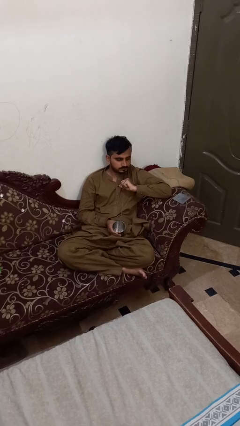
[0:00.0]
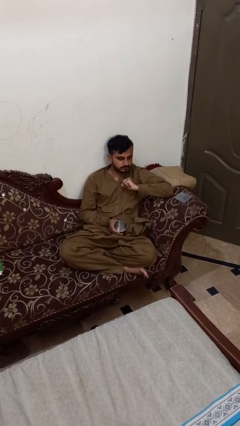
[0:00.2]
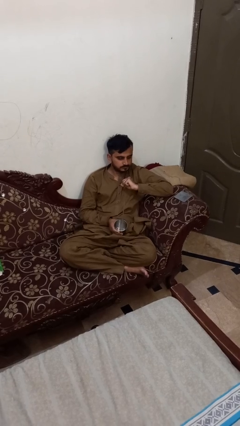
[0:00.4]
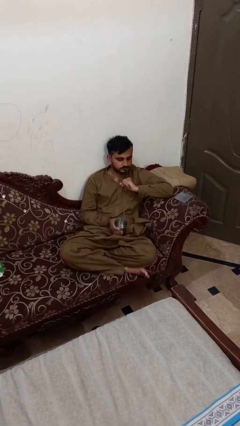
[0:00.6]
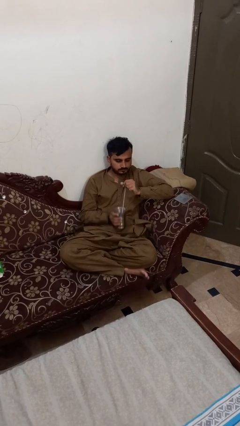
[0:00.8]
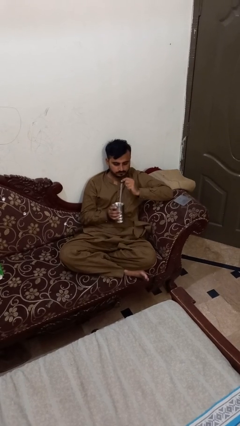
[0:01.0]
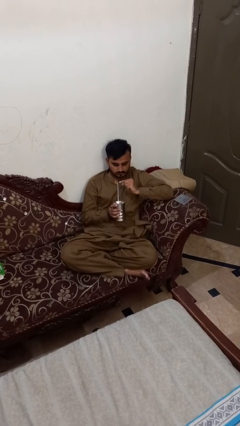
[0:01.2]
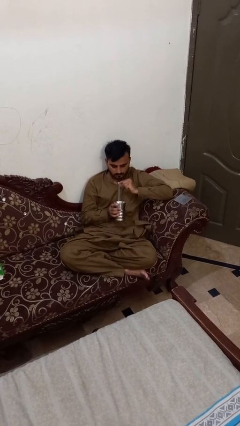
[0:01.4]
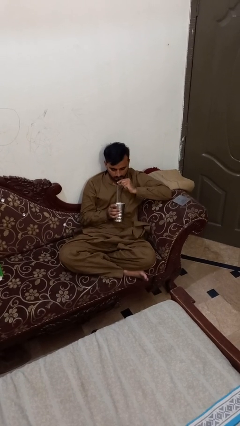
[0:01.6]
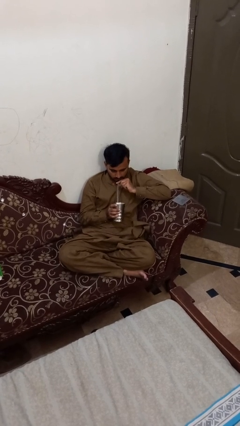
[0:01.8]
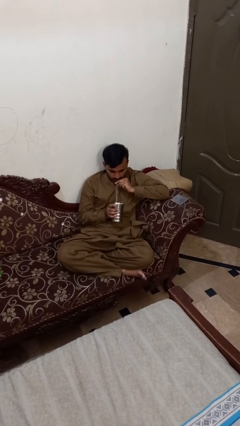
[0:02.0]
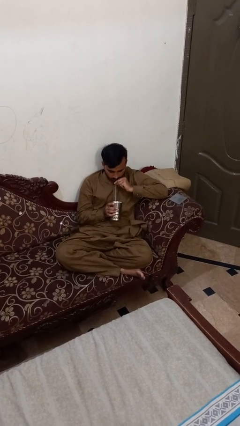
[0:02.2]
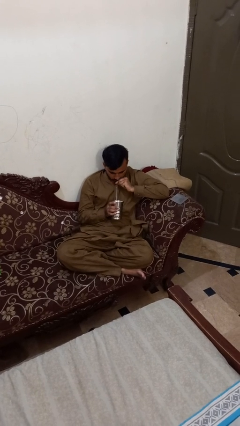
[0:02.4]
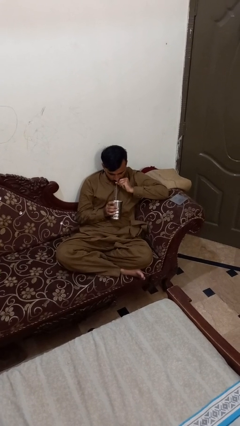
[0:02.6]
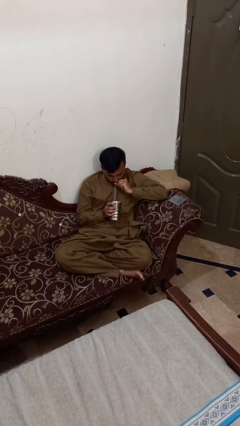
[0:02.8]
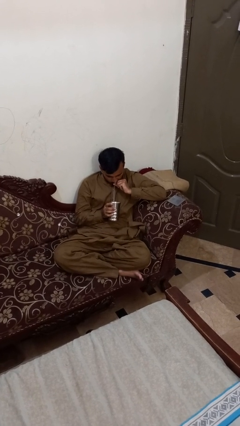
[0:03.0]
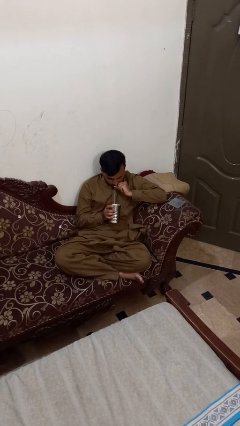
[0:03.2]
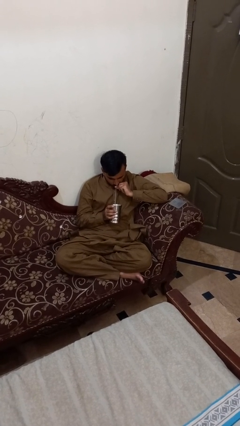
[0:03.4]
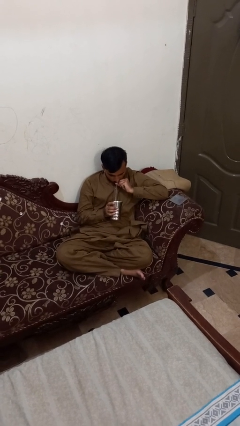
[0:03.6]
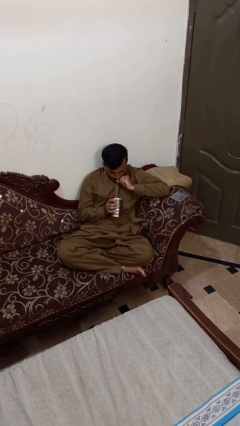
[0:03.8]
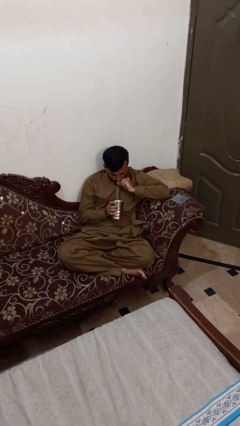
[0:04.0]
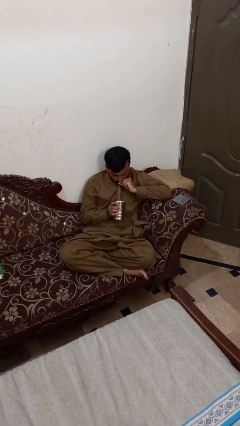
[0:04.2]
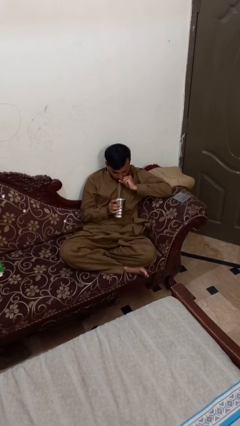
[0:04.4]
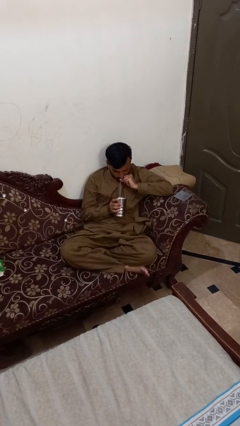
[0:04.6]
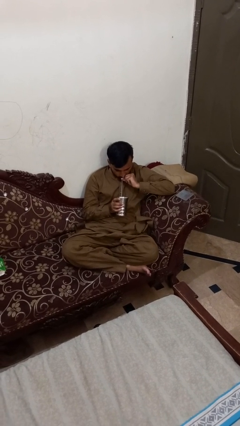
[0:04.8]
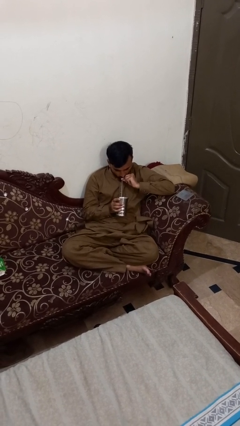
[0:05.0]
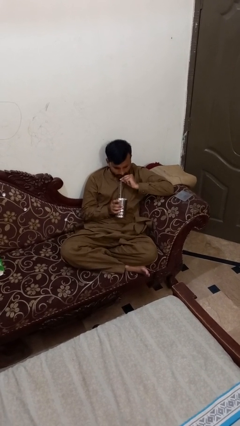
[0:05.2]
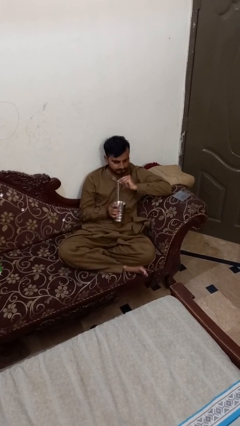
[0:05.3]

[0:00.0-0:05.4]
person drinks from straw

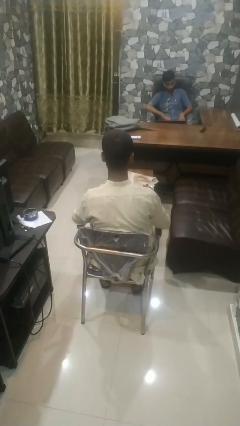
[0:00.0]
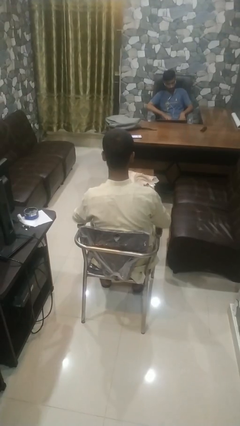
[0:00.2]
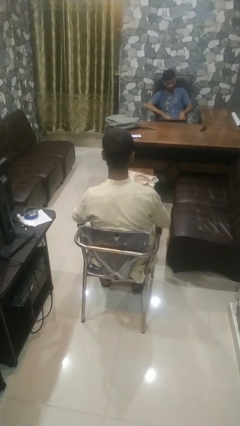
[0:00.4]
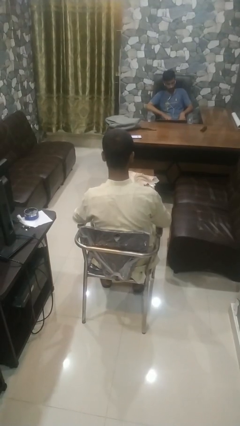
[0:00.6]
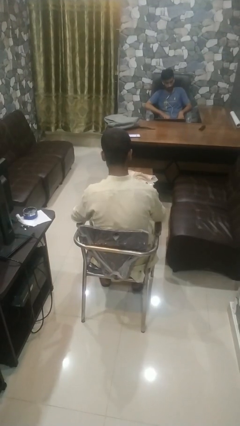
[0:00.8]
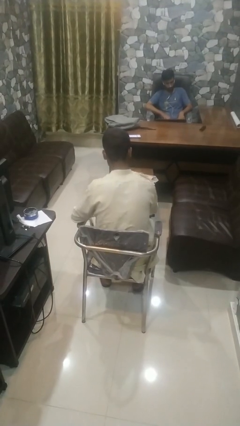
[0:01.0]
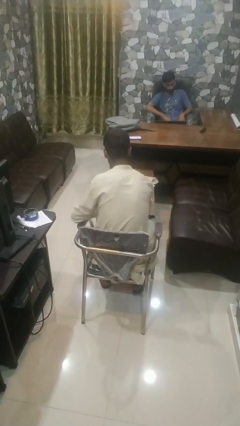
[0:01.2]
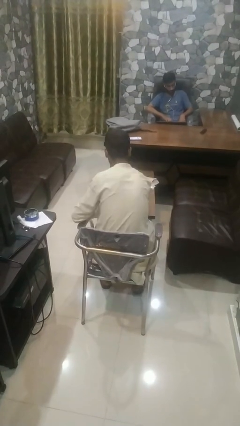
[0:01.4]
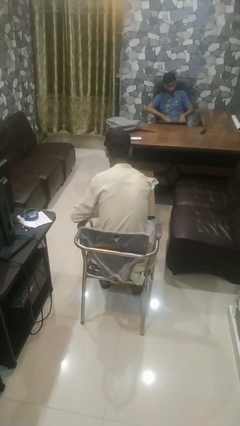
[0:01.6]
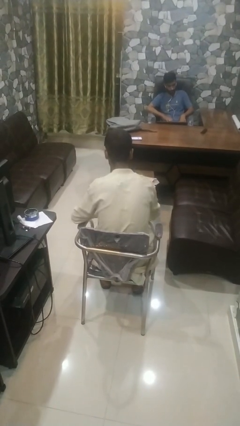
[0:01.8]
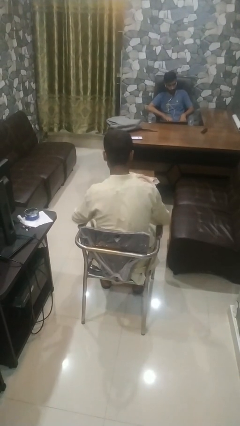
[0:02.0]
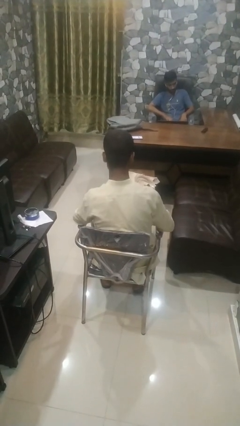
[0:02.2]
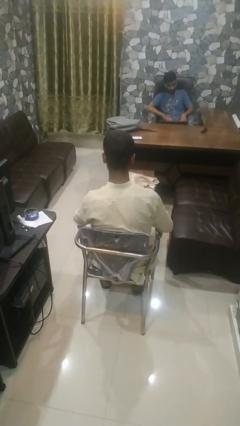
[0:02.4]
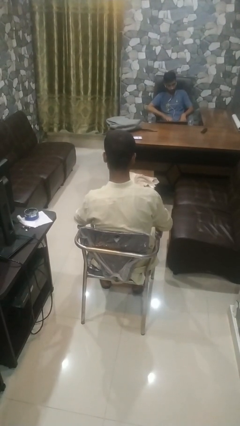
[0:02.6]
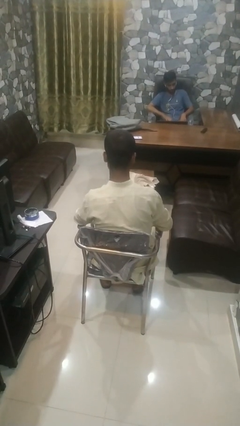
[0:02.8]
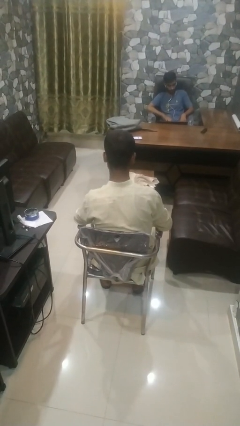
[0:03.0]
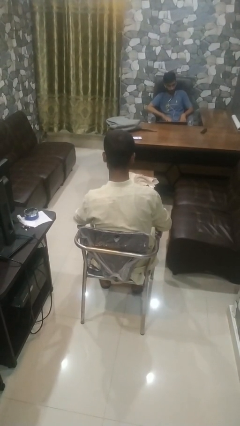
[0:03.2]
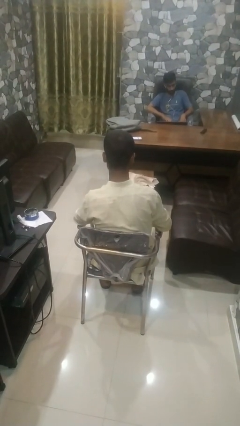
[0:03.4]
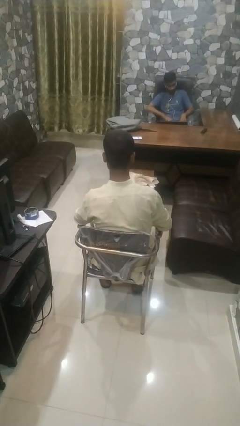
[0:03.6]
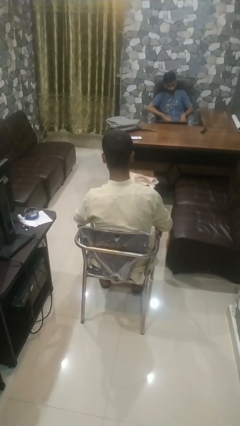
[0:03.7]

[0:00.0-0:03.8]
person paints fingernails

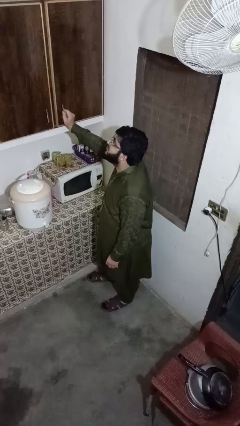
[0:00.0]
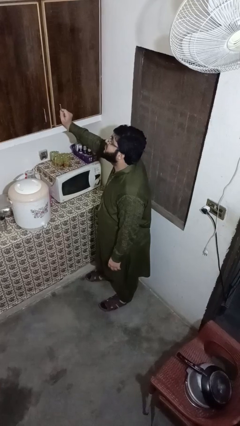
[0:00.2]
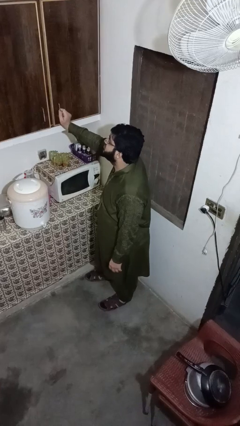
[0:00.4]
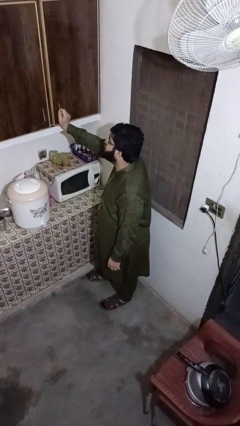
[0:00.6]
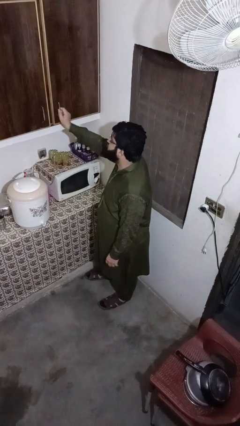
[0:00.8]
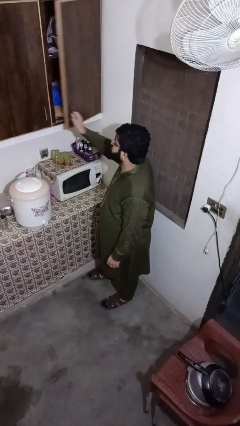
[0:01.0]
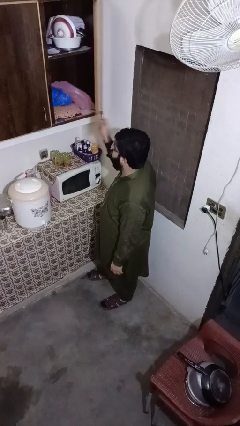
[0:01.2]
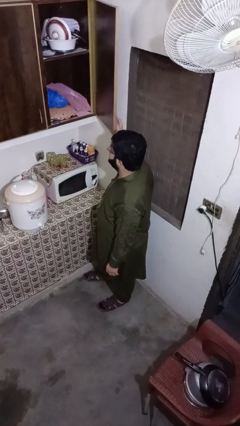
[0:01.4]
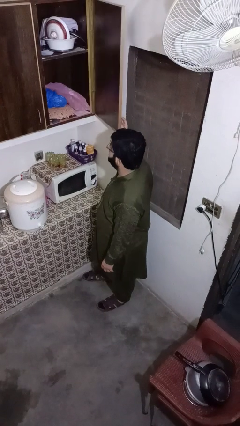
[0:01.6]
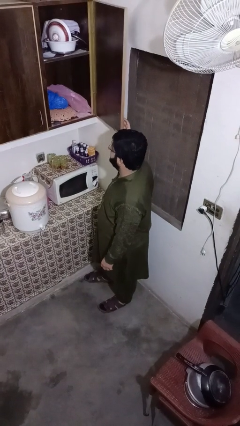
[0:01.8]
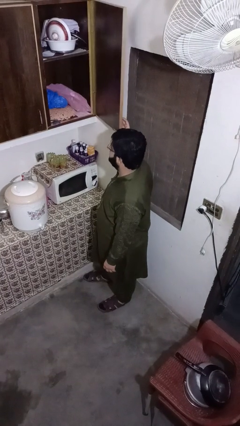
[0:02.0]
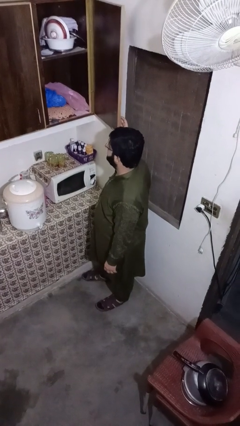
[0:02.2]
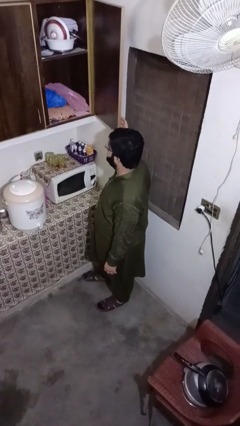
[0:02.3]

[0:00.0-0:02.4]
person opens kitchen drawer

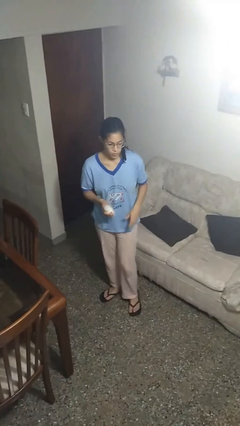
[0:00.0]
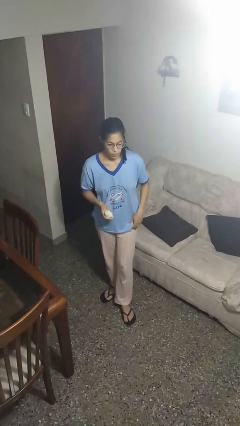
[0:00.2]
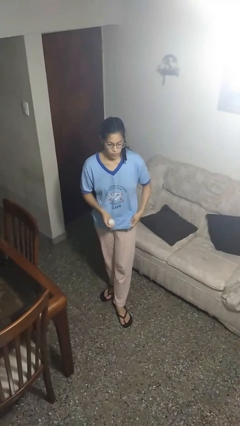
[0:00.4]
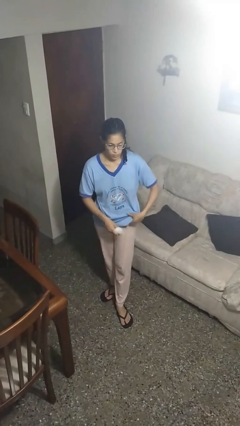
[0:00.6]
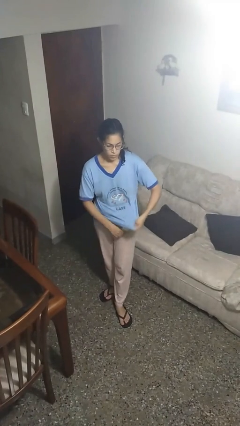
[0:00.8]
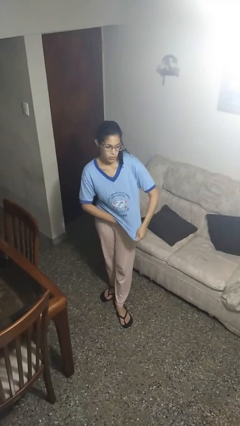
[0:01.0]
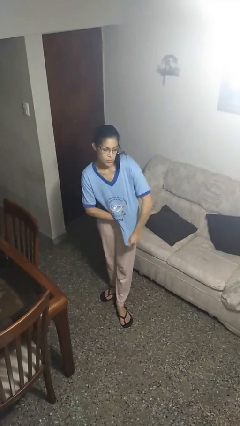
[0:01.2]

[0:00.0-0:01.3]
person applies deodorant

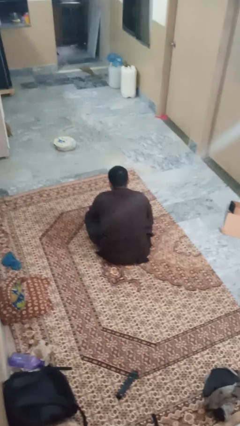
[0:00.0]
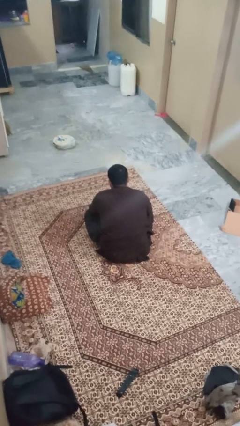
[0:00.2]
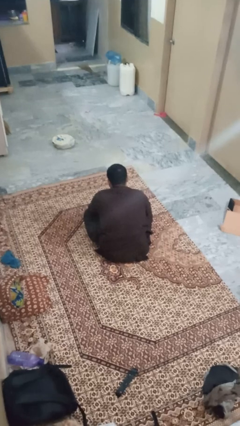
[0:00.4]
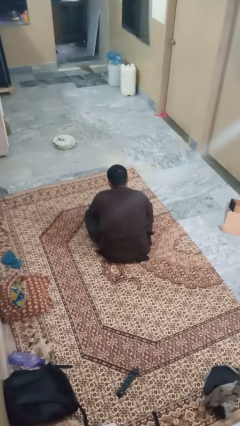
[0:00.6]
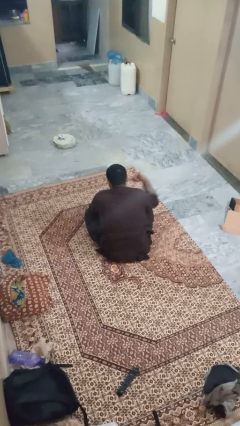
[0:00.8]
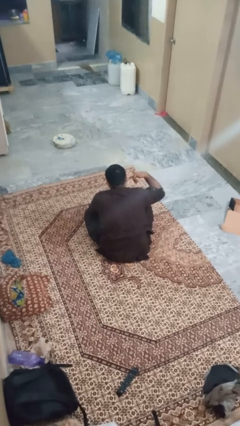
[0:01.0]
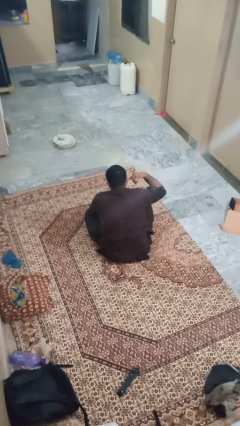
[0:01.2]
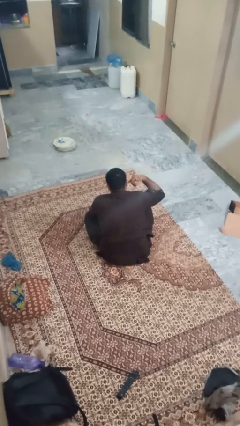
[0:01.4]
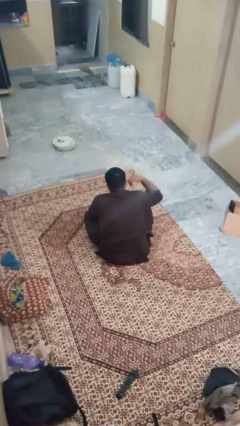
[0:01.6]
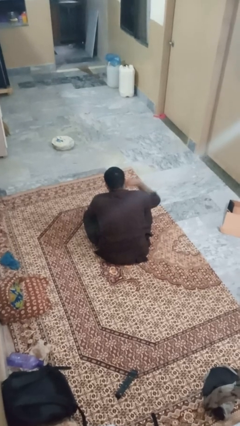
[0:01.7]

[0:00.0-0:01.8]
person gestures call me

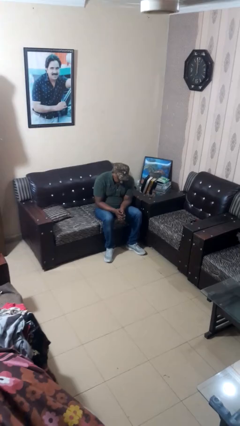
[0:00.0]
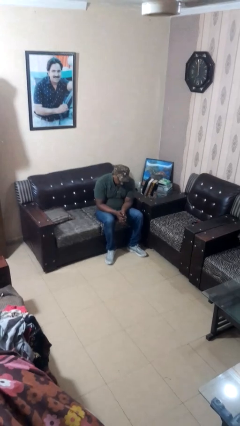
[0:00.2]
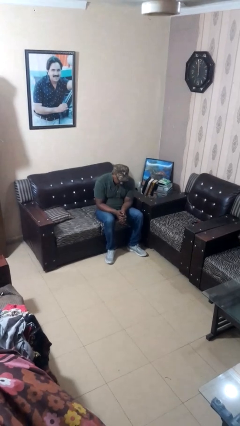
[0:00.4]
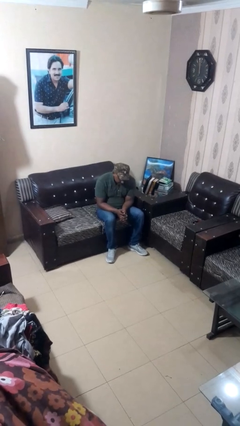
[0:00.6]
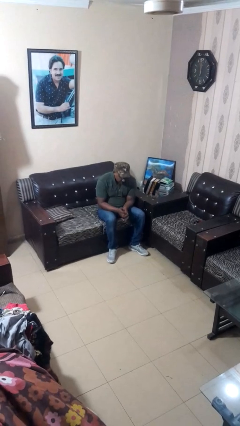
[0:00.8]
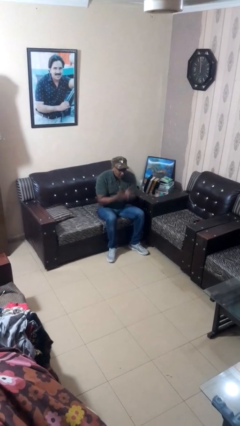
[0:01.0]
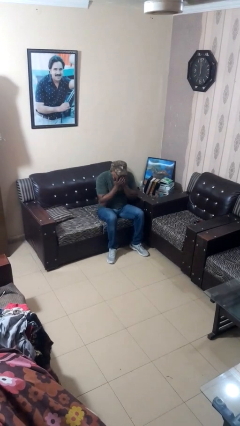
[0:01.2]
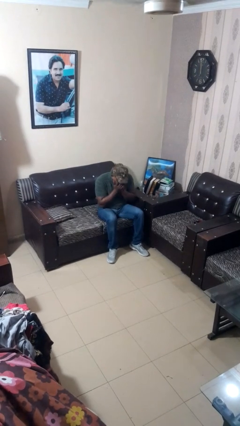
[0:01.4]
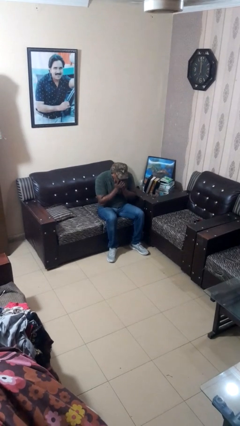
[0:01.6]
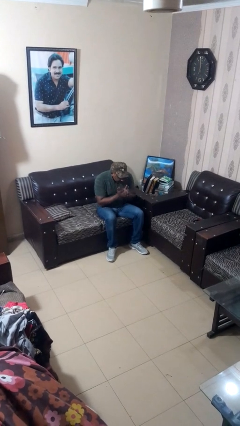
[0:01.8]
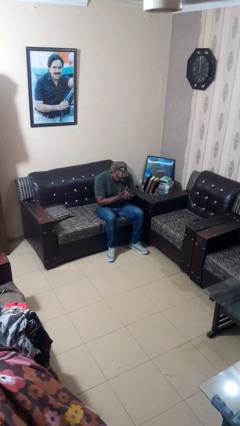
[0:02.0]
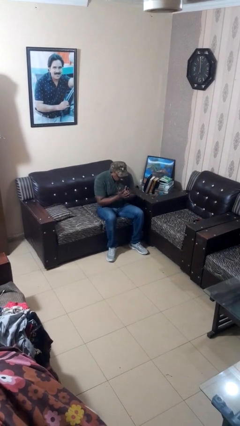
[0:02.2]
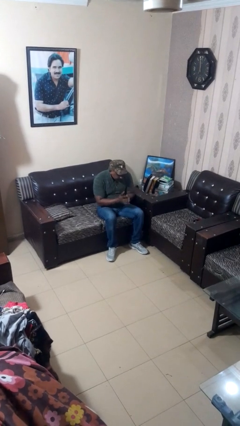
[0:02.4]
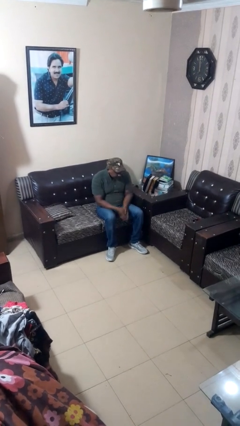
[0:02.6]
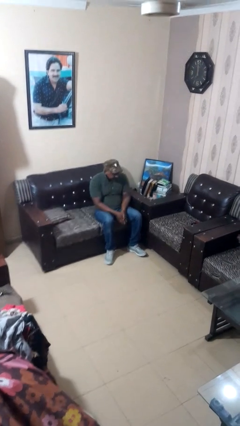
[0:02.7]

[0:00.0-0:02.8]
person sneezes into hand

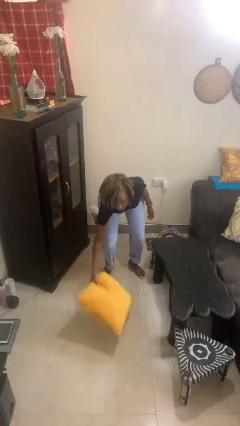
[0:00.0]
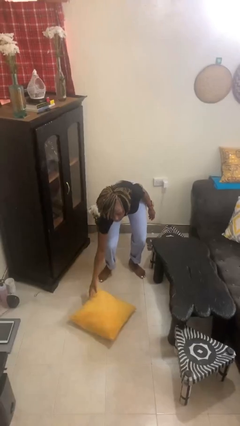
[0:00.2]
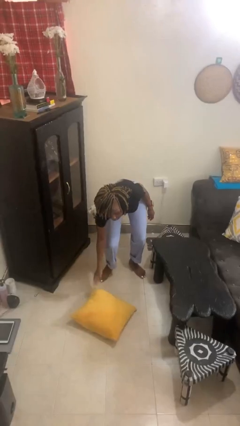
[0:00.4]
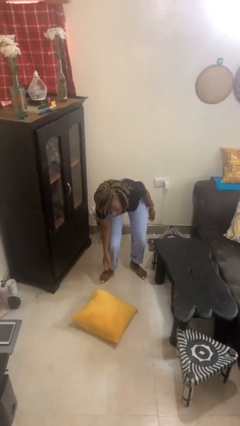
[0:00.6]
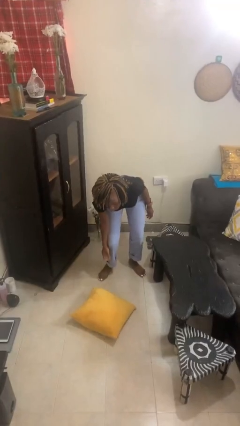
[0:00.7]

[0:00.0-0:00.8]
person catches dropped object
